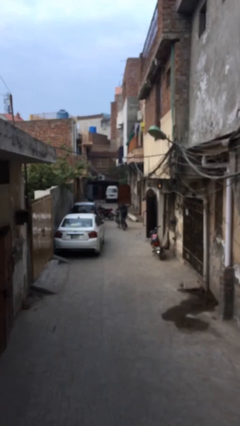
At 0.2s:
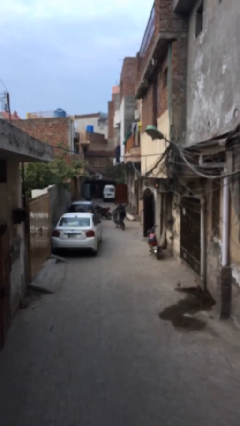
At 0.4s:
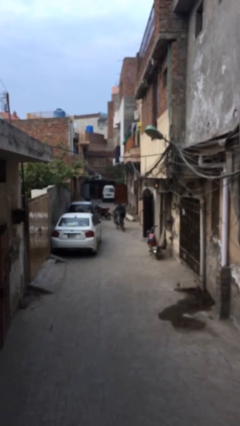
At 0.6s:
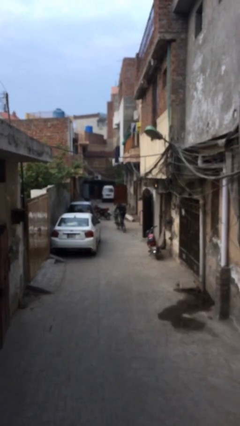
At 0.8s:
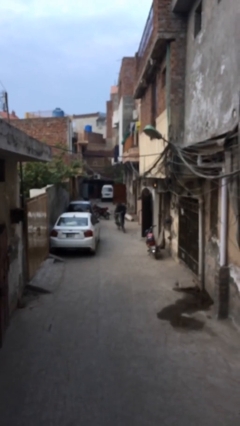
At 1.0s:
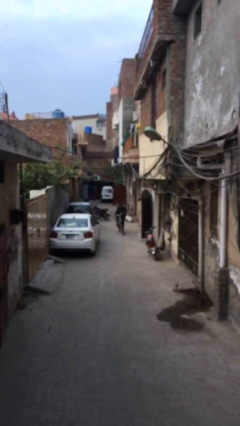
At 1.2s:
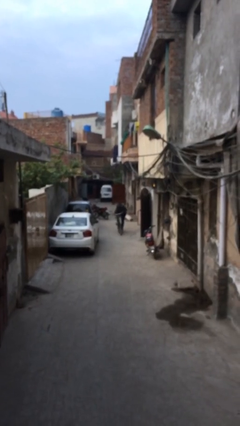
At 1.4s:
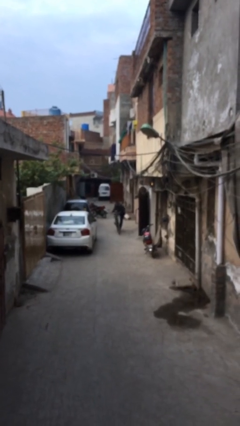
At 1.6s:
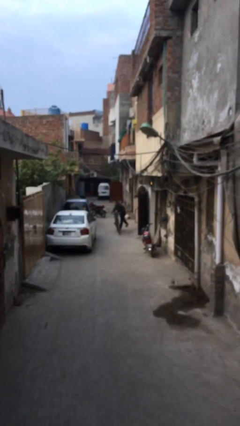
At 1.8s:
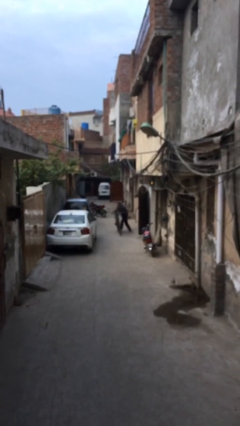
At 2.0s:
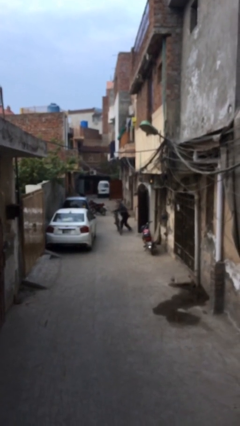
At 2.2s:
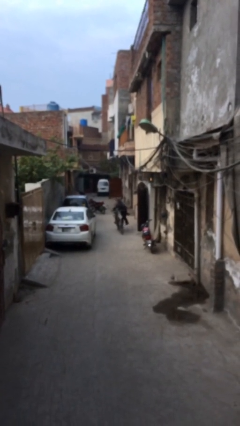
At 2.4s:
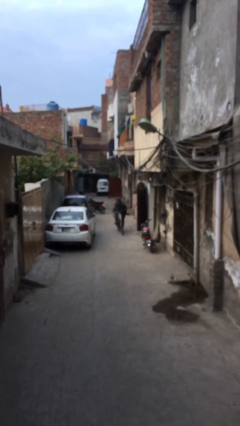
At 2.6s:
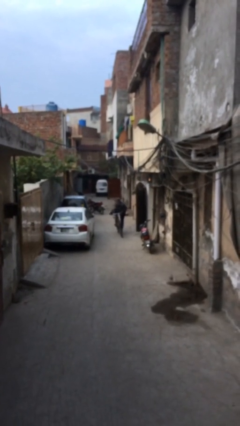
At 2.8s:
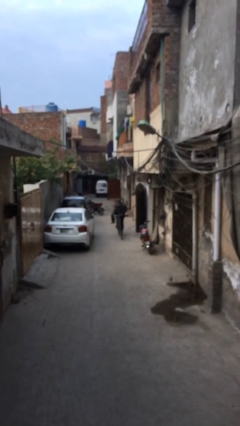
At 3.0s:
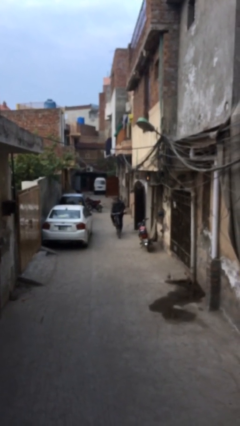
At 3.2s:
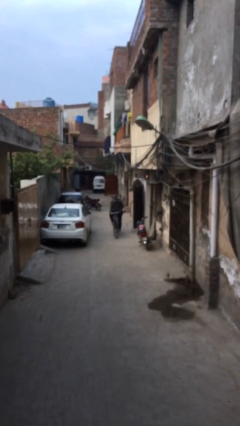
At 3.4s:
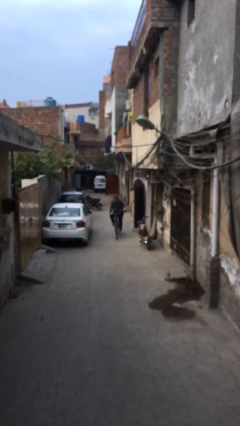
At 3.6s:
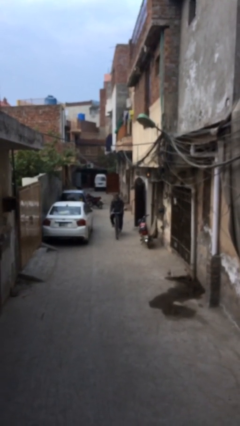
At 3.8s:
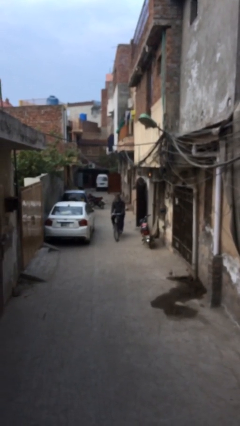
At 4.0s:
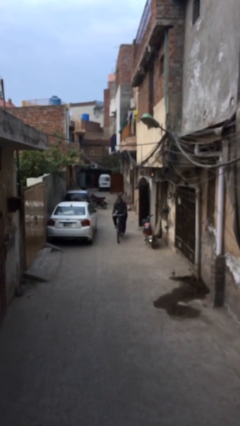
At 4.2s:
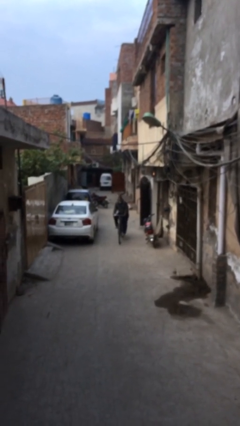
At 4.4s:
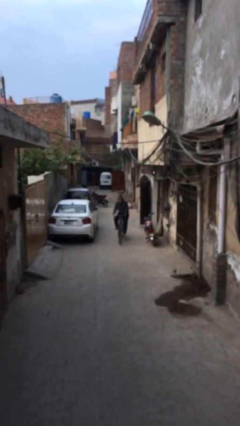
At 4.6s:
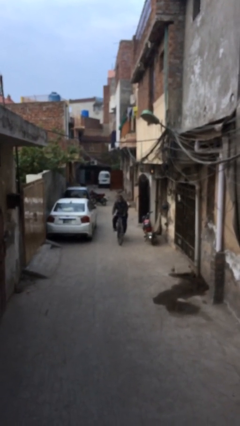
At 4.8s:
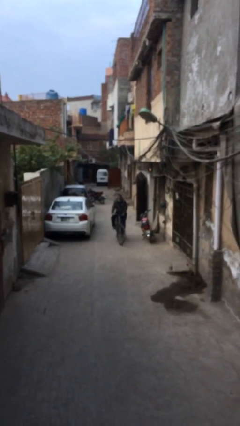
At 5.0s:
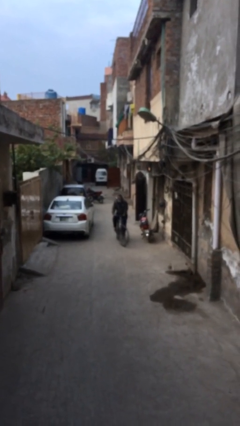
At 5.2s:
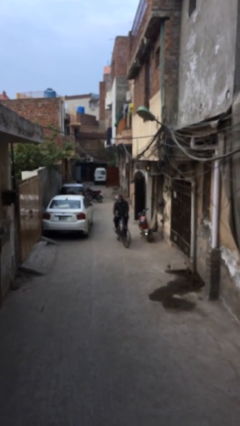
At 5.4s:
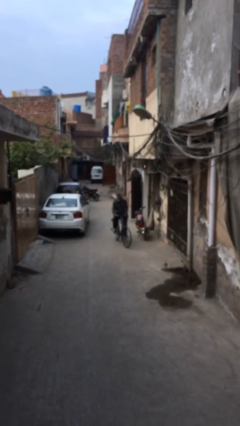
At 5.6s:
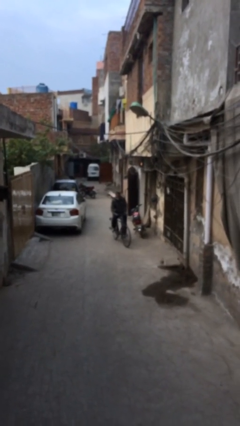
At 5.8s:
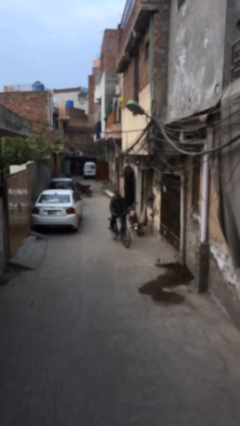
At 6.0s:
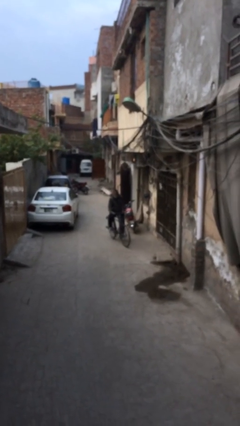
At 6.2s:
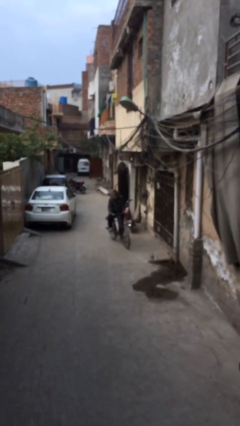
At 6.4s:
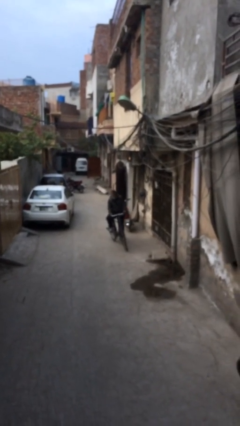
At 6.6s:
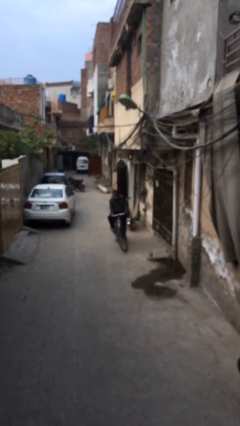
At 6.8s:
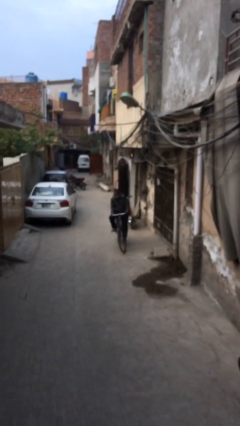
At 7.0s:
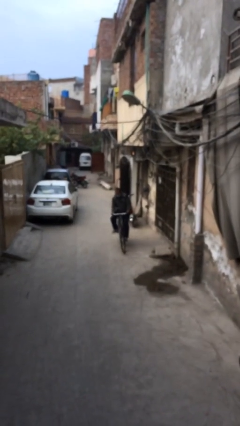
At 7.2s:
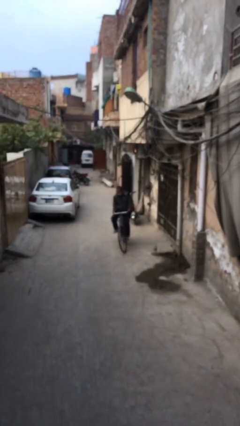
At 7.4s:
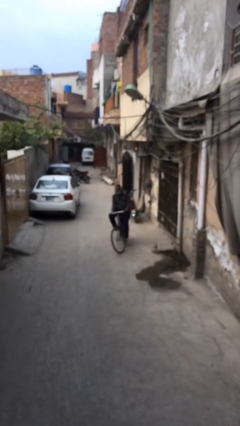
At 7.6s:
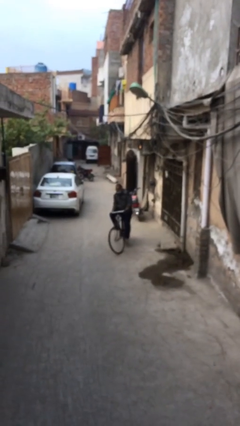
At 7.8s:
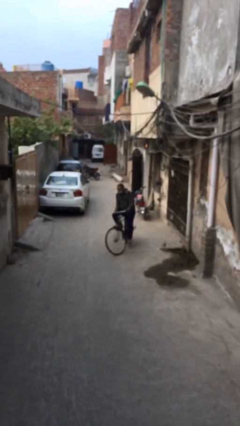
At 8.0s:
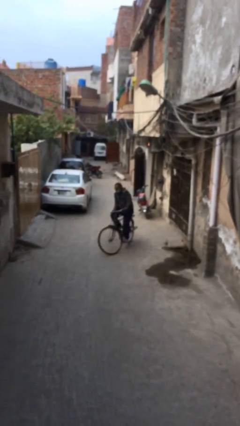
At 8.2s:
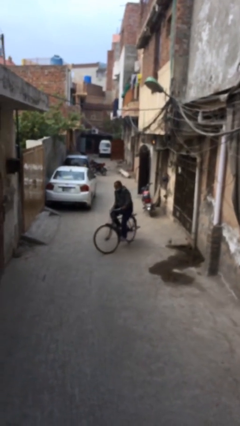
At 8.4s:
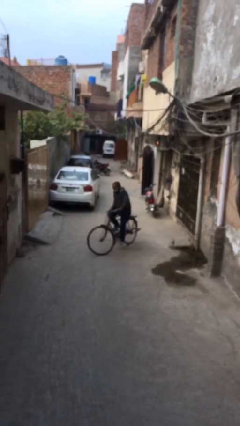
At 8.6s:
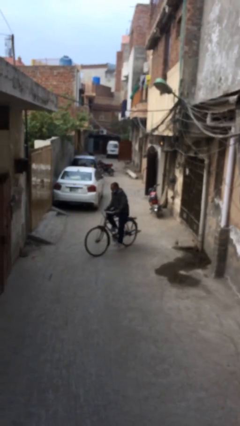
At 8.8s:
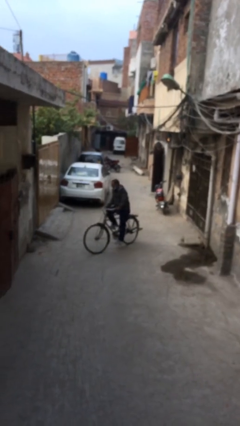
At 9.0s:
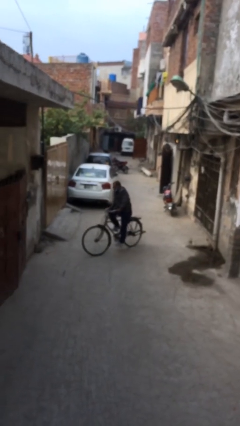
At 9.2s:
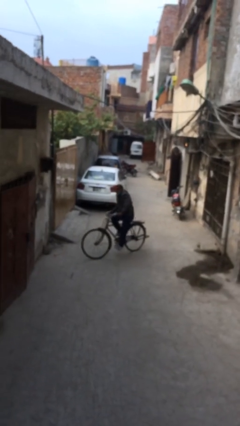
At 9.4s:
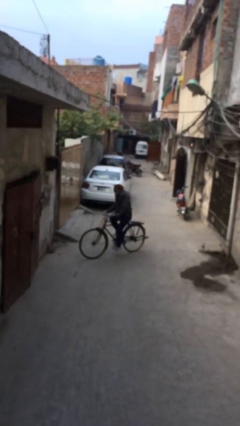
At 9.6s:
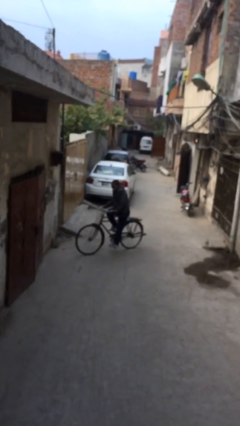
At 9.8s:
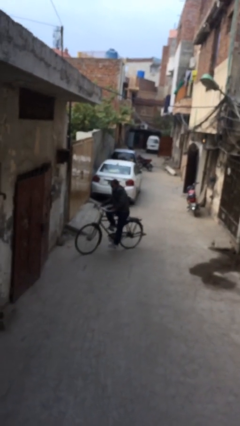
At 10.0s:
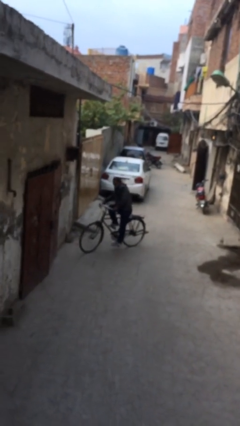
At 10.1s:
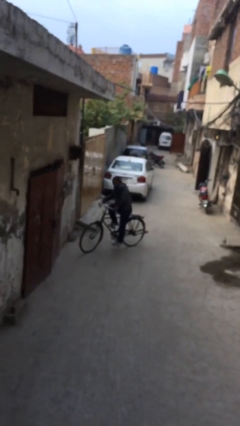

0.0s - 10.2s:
person rides bicycle

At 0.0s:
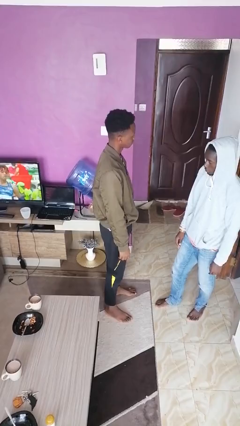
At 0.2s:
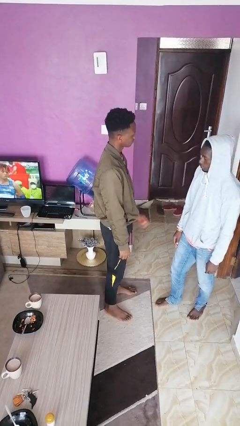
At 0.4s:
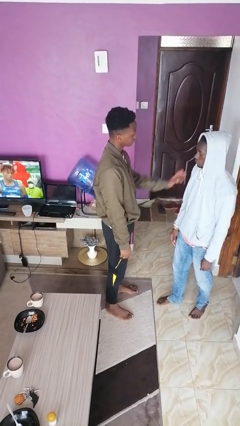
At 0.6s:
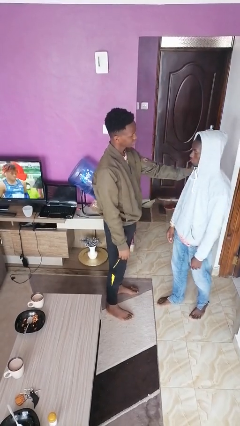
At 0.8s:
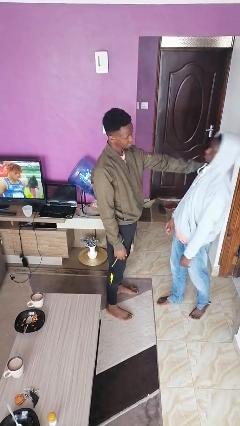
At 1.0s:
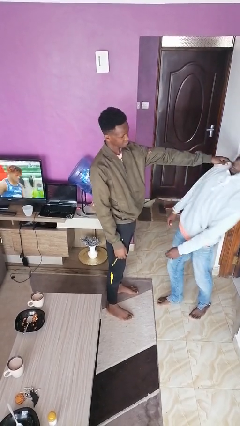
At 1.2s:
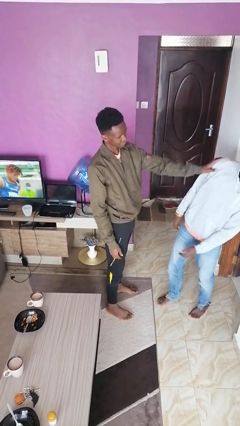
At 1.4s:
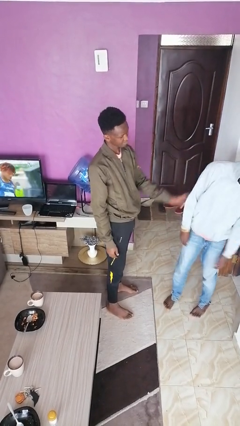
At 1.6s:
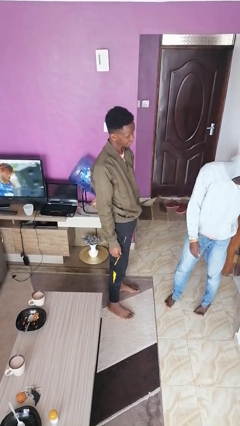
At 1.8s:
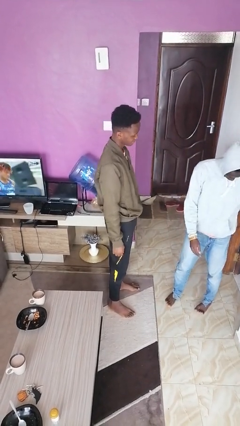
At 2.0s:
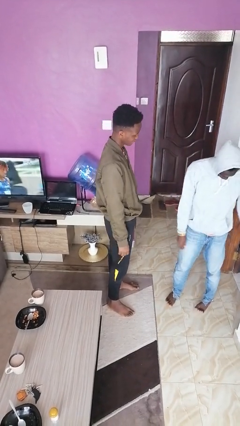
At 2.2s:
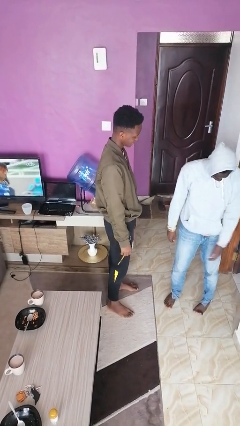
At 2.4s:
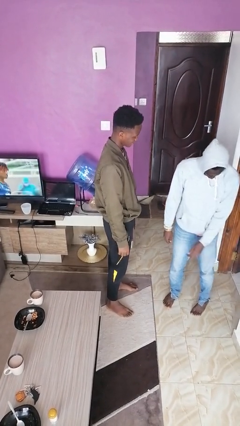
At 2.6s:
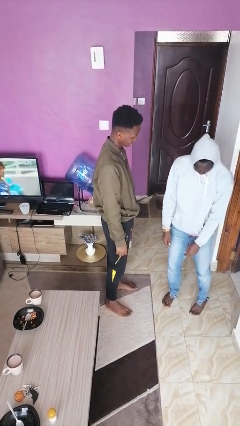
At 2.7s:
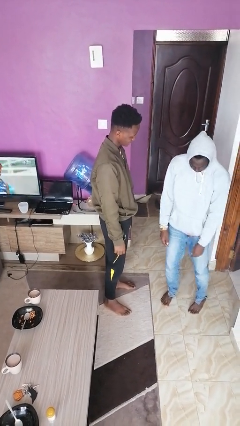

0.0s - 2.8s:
person shoves person

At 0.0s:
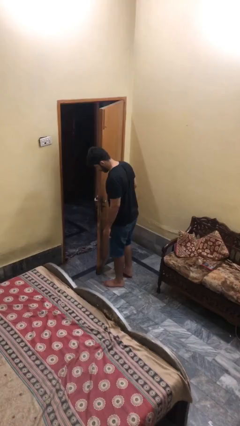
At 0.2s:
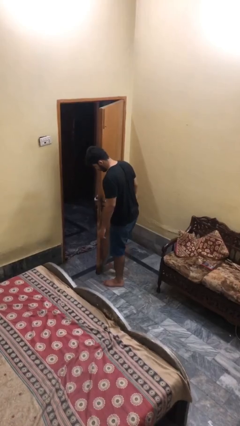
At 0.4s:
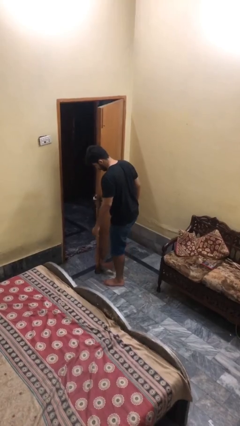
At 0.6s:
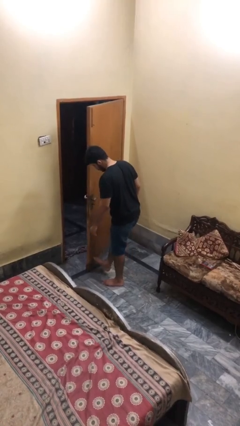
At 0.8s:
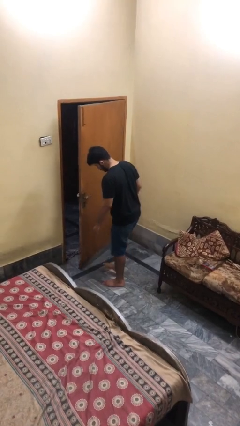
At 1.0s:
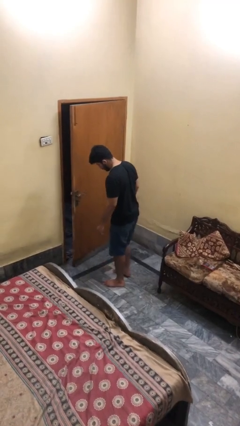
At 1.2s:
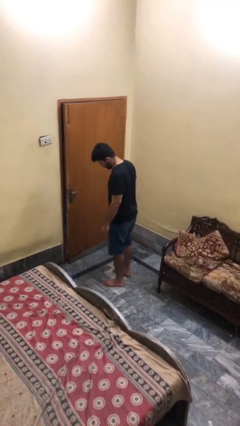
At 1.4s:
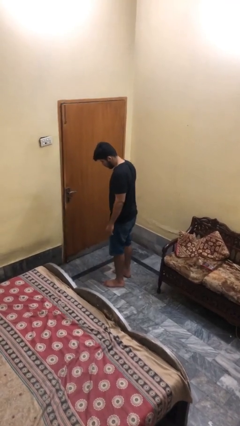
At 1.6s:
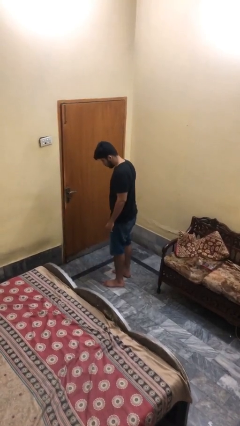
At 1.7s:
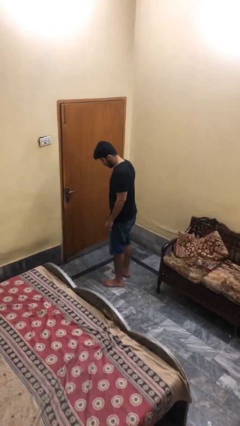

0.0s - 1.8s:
person closes door with foot

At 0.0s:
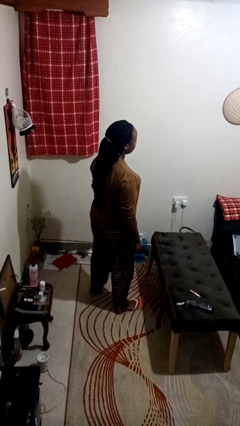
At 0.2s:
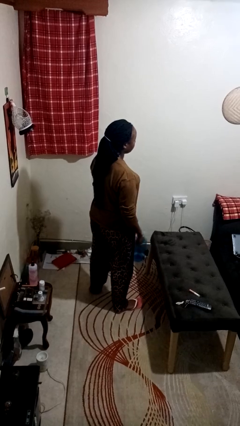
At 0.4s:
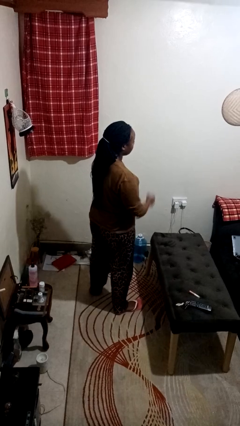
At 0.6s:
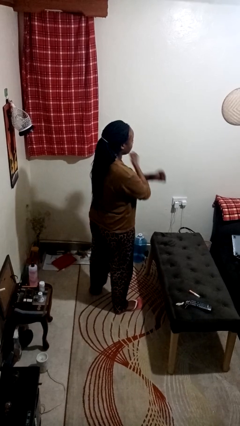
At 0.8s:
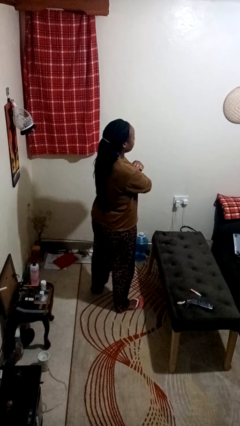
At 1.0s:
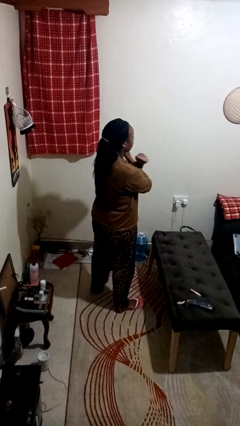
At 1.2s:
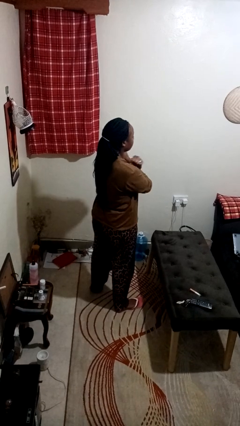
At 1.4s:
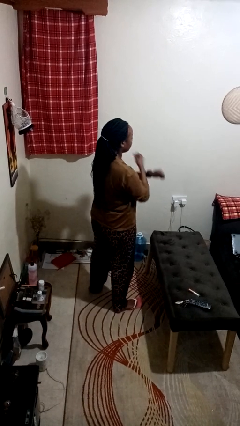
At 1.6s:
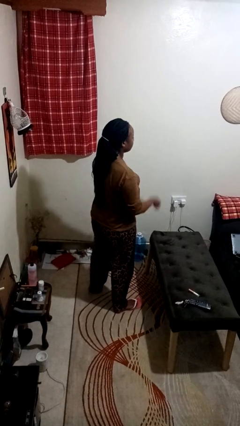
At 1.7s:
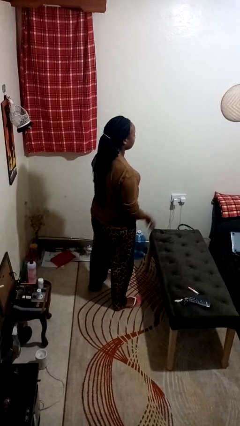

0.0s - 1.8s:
person gestures arms x

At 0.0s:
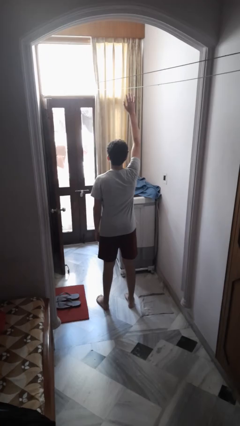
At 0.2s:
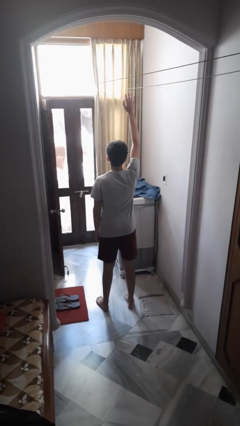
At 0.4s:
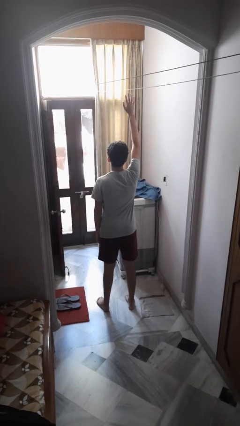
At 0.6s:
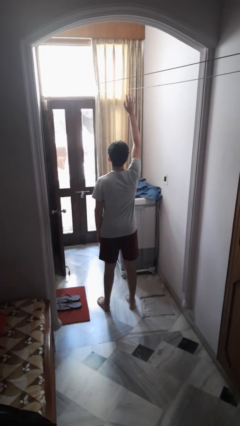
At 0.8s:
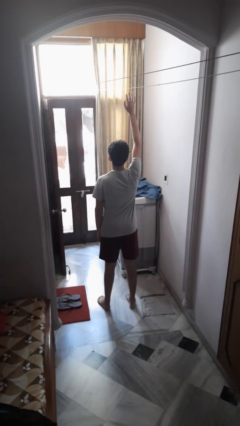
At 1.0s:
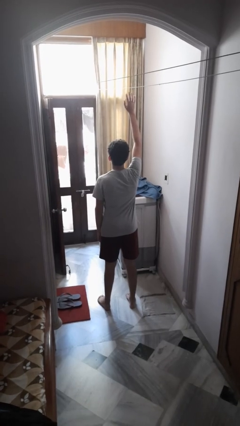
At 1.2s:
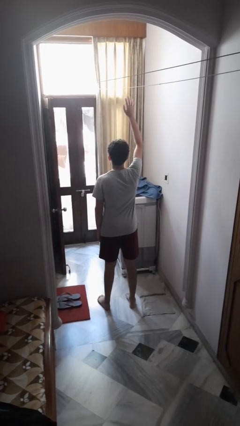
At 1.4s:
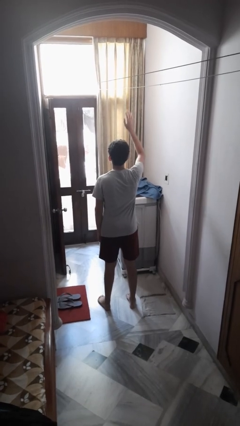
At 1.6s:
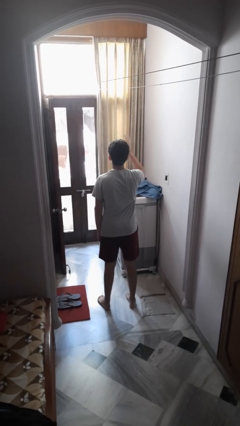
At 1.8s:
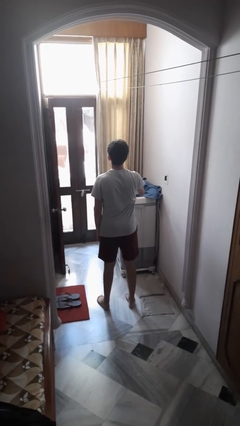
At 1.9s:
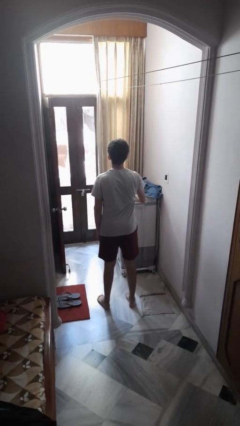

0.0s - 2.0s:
person gestures raise hand
